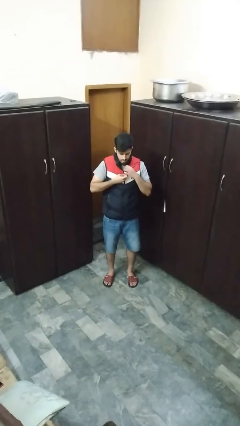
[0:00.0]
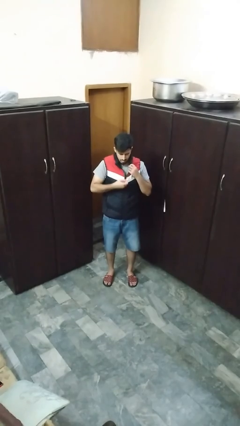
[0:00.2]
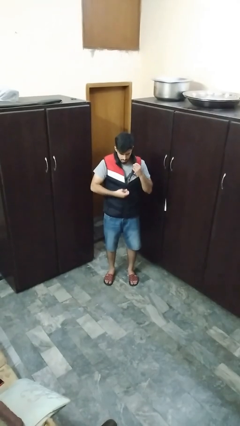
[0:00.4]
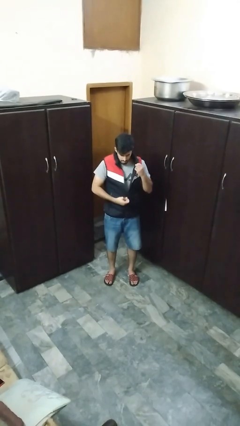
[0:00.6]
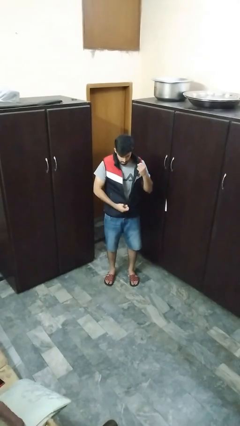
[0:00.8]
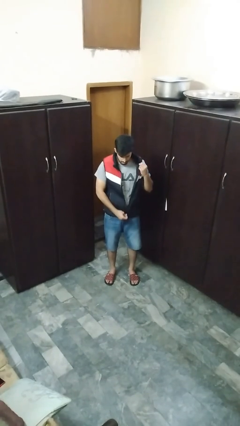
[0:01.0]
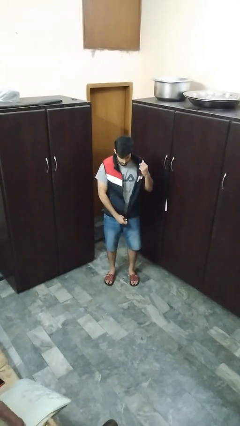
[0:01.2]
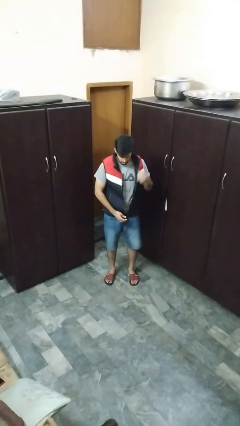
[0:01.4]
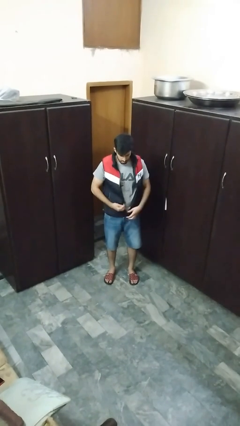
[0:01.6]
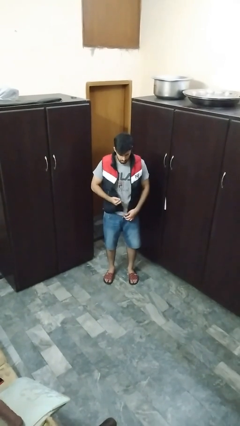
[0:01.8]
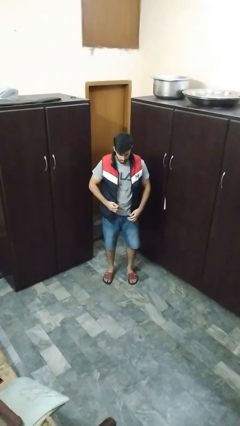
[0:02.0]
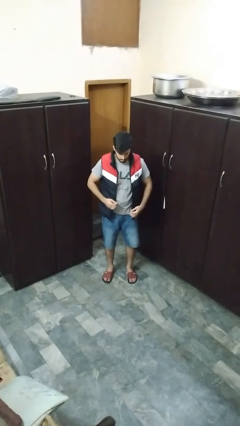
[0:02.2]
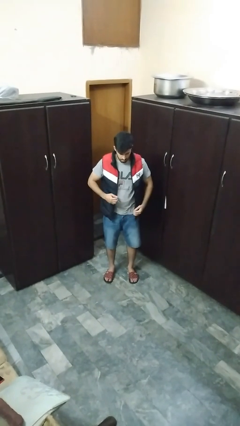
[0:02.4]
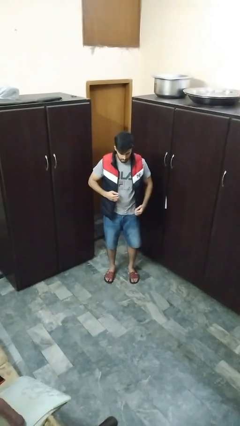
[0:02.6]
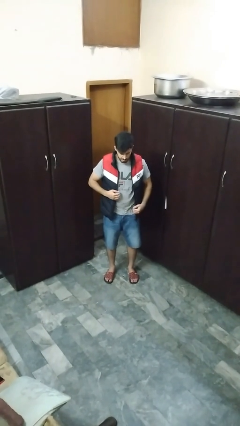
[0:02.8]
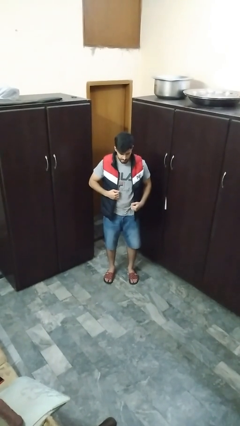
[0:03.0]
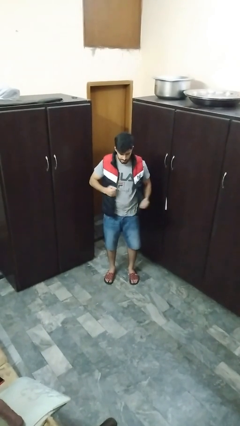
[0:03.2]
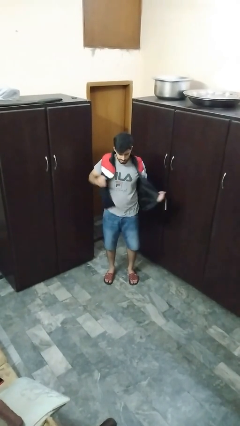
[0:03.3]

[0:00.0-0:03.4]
person unzips jacket

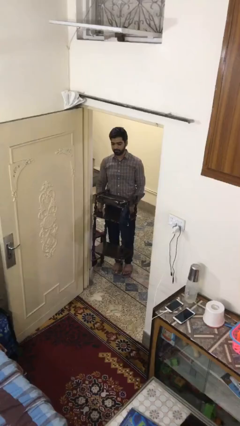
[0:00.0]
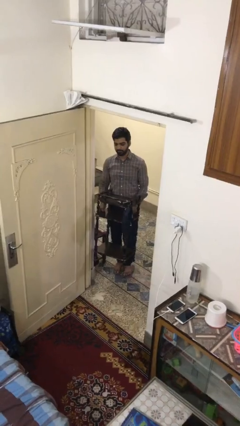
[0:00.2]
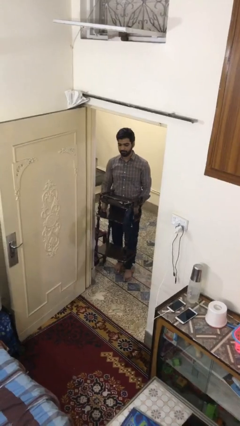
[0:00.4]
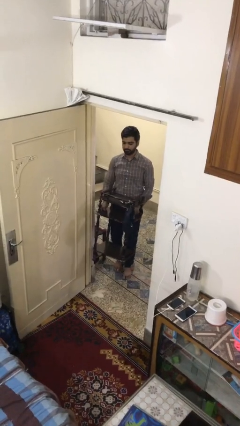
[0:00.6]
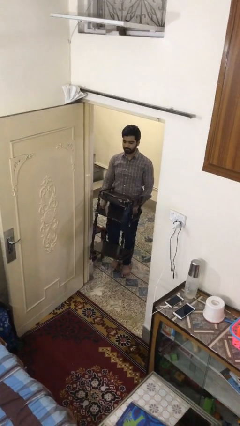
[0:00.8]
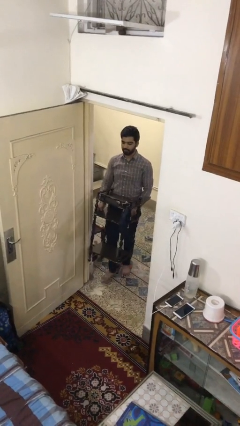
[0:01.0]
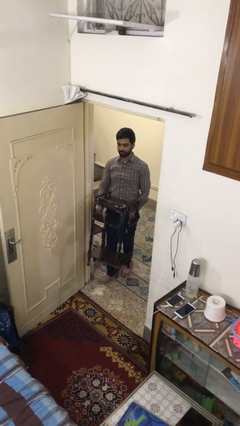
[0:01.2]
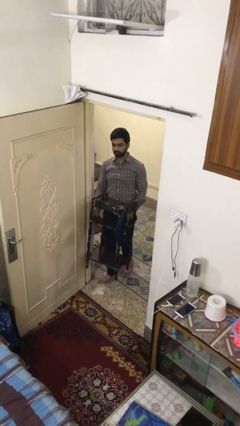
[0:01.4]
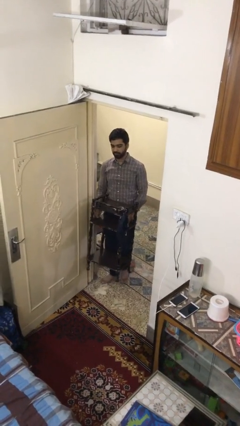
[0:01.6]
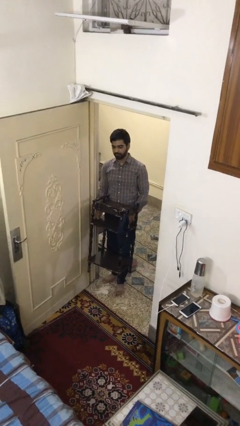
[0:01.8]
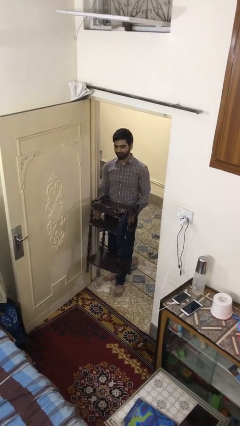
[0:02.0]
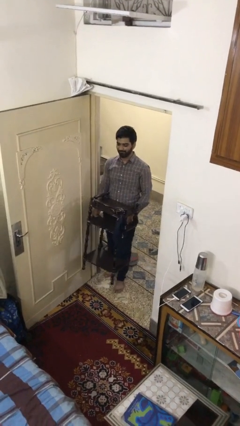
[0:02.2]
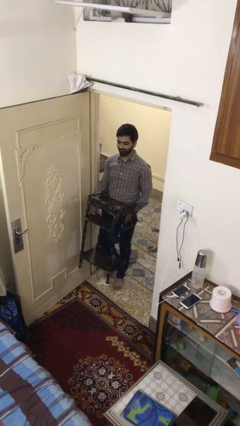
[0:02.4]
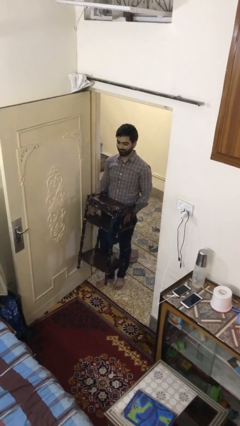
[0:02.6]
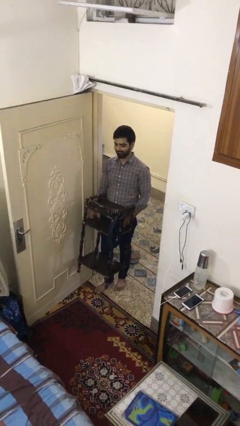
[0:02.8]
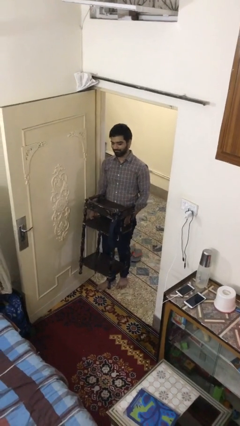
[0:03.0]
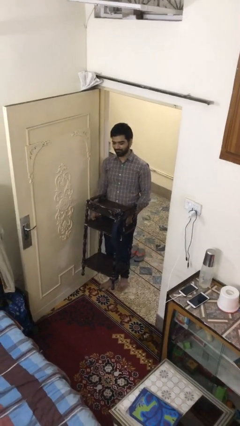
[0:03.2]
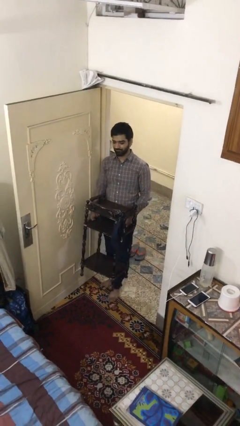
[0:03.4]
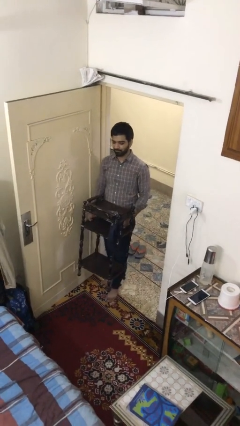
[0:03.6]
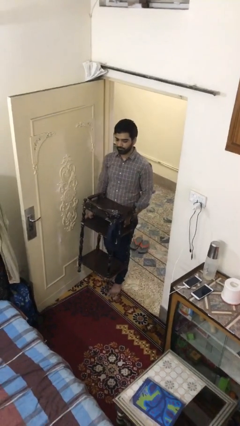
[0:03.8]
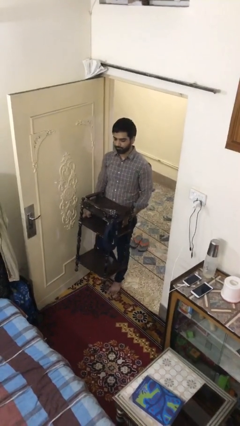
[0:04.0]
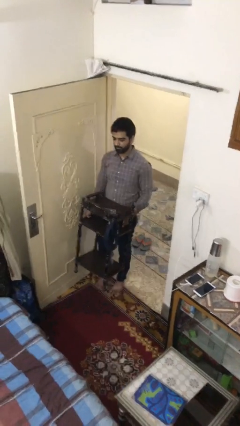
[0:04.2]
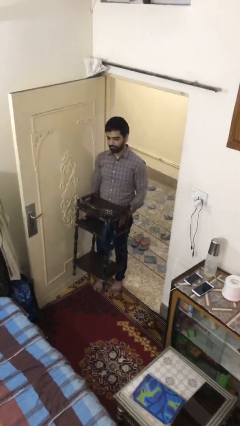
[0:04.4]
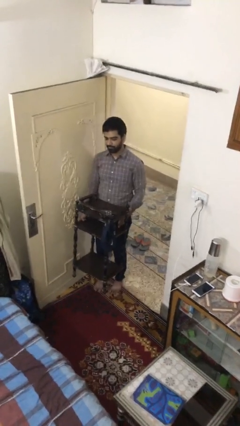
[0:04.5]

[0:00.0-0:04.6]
person carries heavy object

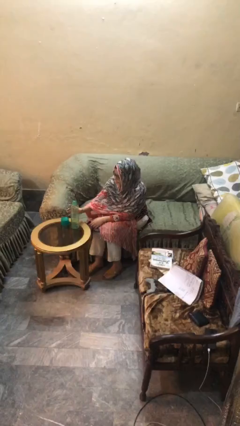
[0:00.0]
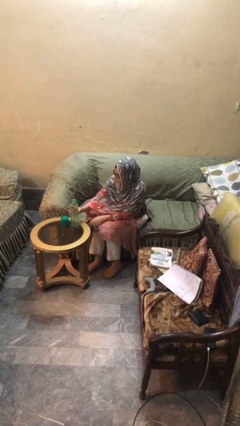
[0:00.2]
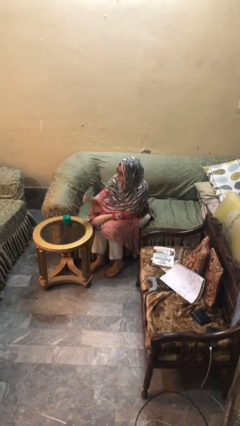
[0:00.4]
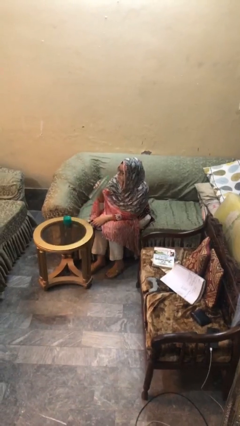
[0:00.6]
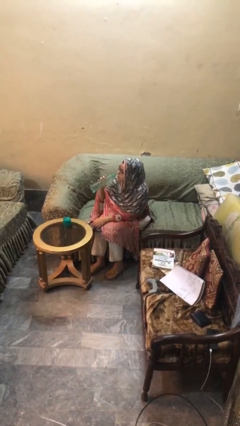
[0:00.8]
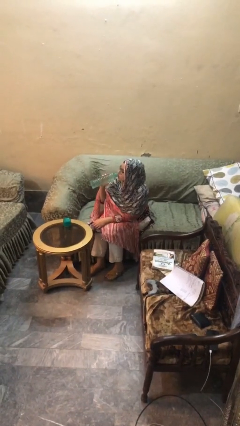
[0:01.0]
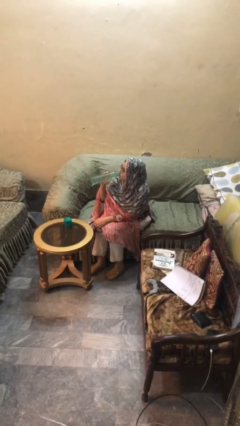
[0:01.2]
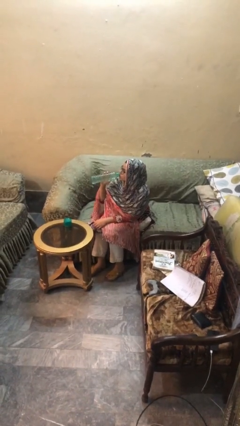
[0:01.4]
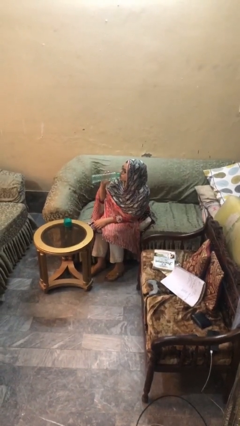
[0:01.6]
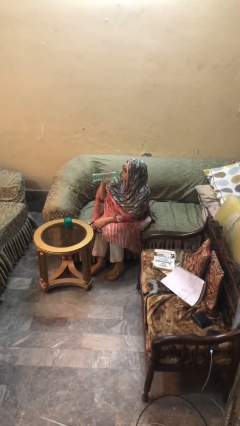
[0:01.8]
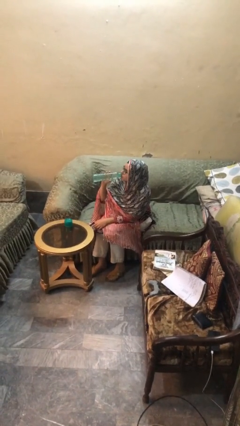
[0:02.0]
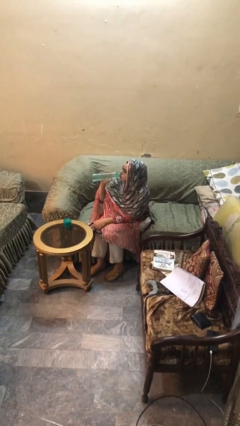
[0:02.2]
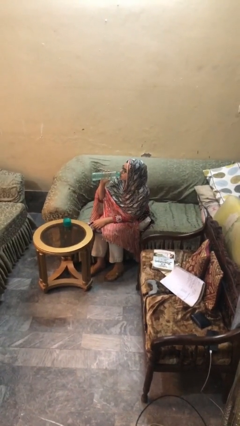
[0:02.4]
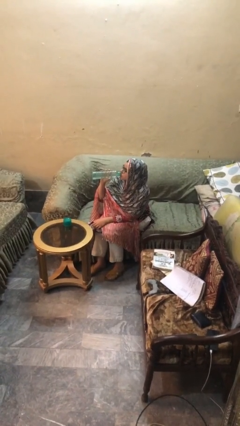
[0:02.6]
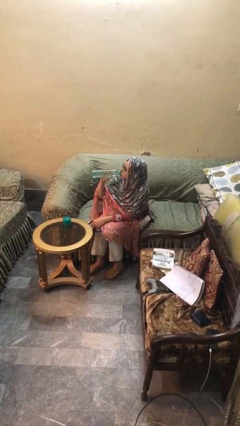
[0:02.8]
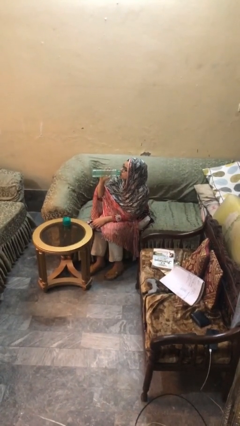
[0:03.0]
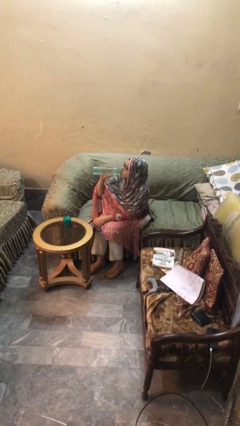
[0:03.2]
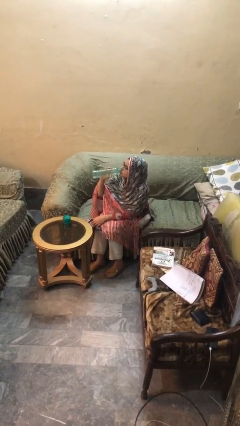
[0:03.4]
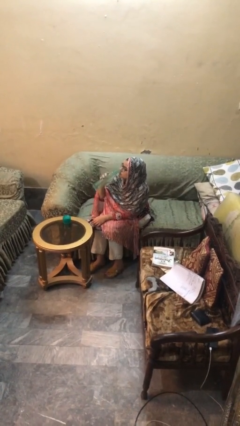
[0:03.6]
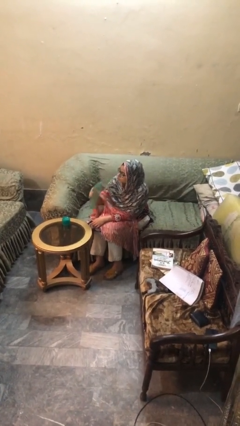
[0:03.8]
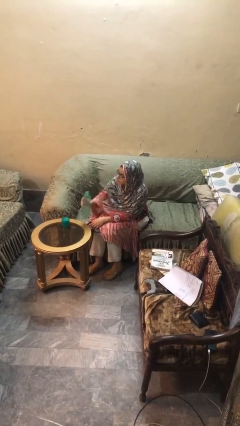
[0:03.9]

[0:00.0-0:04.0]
person drinks from bottle

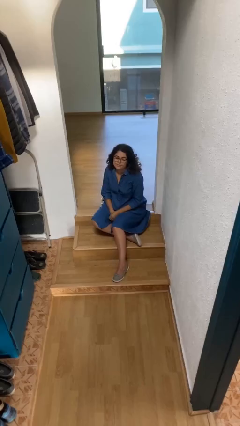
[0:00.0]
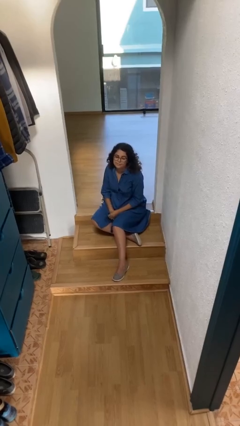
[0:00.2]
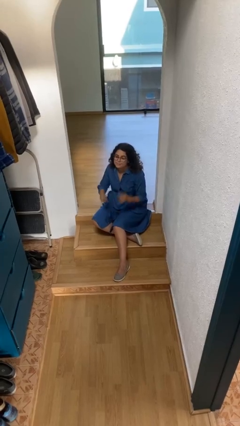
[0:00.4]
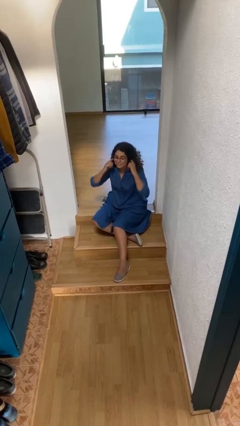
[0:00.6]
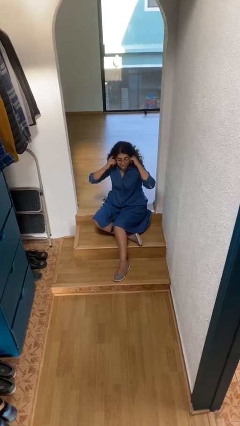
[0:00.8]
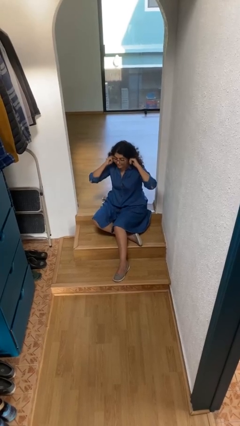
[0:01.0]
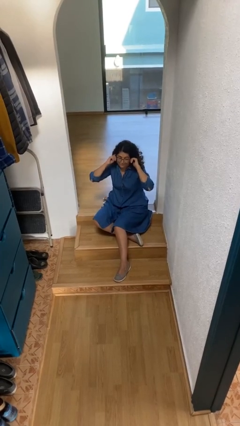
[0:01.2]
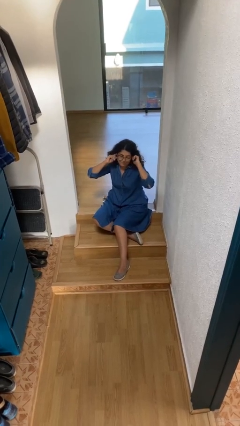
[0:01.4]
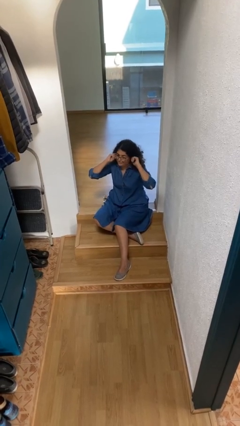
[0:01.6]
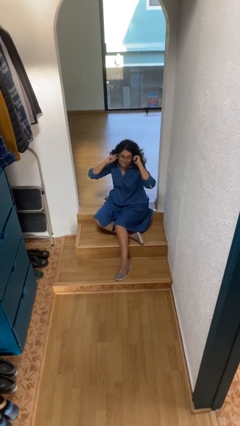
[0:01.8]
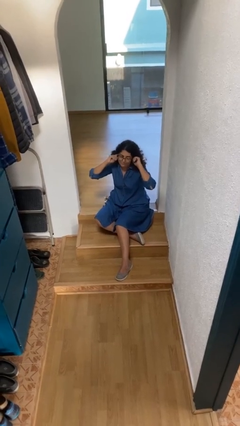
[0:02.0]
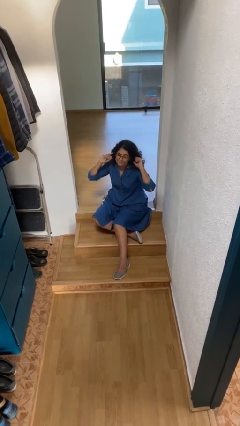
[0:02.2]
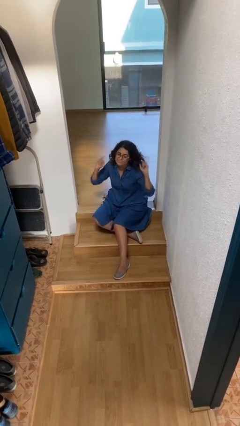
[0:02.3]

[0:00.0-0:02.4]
person puts fingers in ear

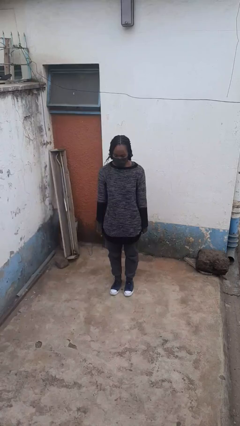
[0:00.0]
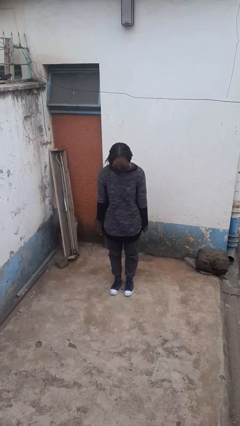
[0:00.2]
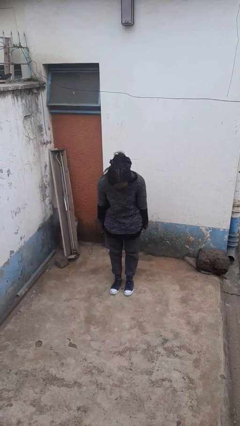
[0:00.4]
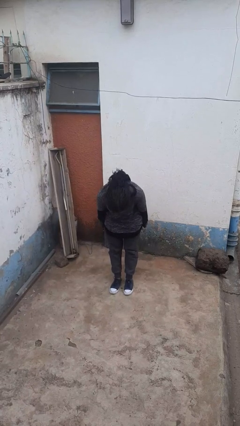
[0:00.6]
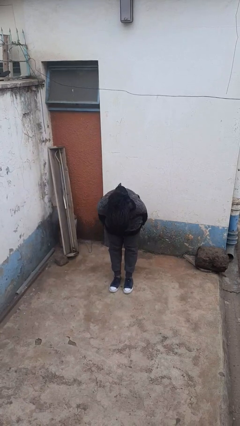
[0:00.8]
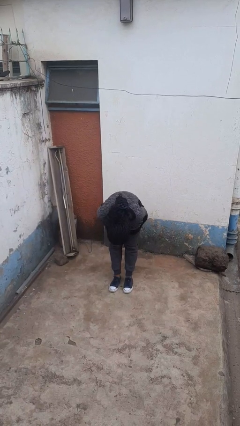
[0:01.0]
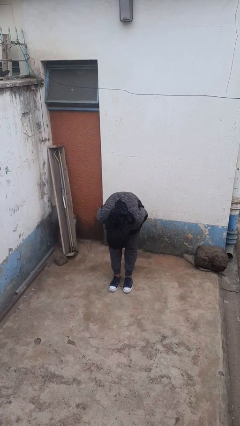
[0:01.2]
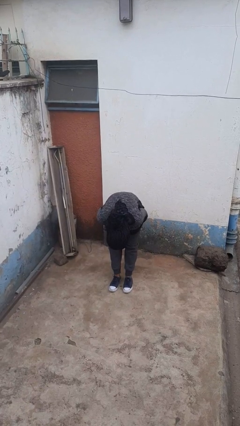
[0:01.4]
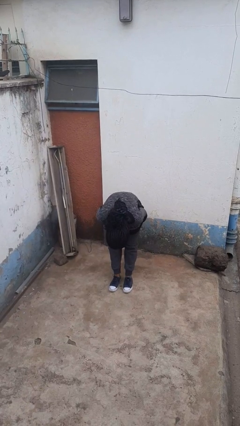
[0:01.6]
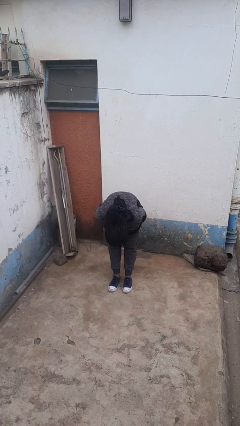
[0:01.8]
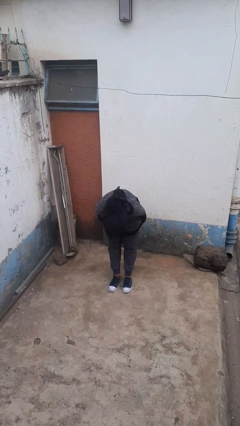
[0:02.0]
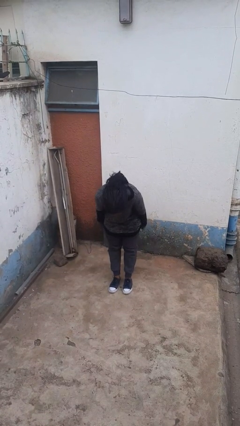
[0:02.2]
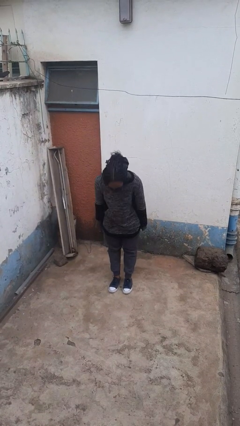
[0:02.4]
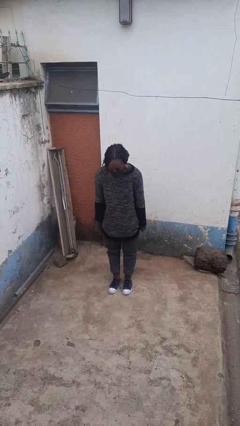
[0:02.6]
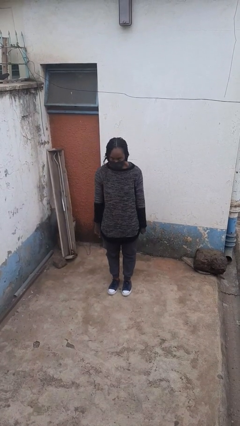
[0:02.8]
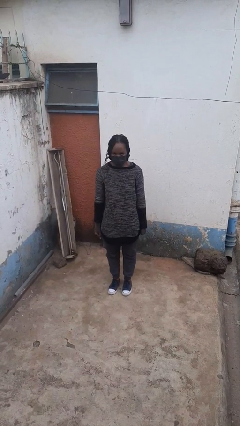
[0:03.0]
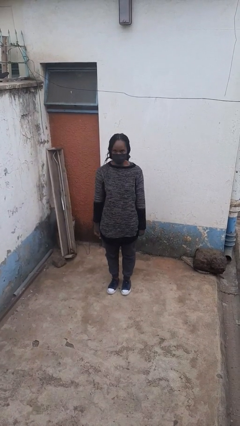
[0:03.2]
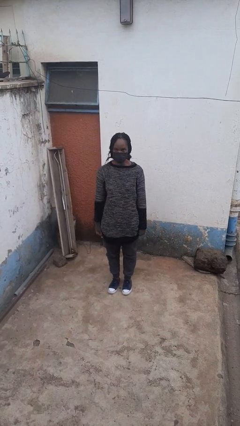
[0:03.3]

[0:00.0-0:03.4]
person bows
